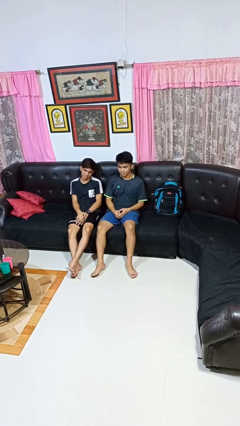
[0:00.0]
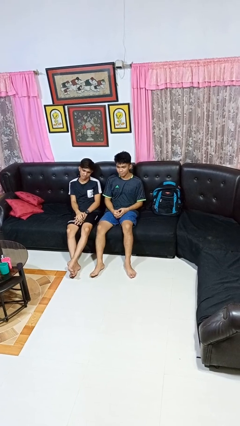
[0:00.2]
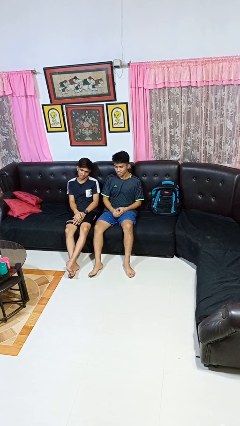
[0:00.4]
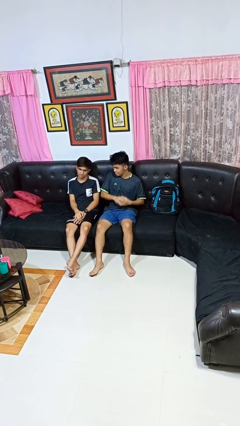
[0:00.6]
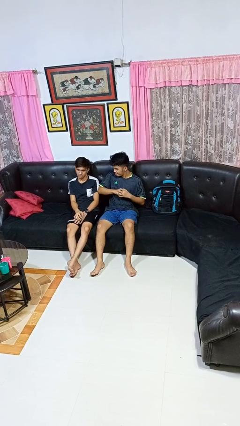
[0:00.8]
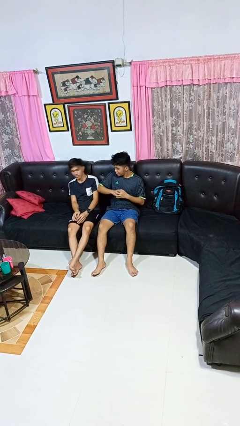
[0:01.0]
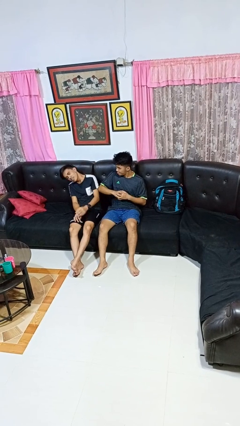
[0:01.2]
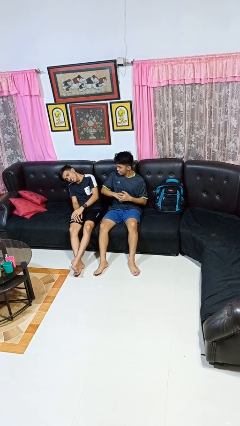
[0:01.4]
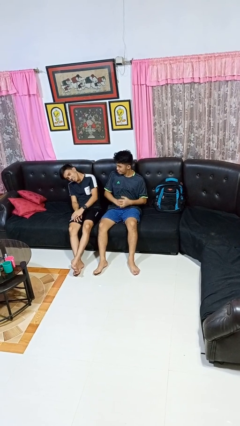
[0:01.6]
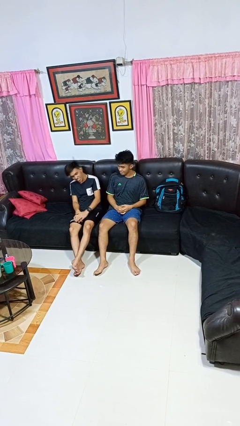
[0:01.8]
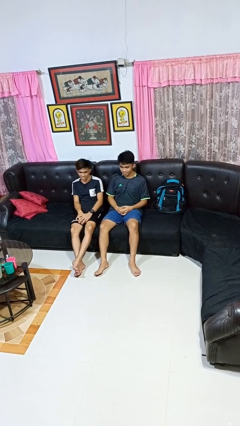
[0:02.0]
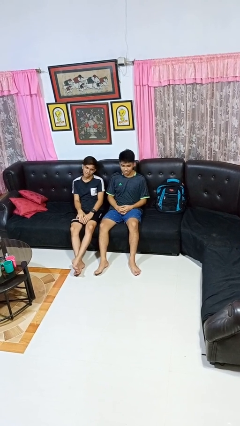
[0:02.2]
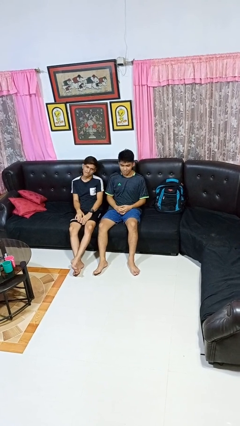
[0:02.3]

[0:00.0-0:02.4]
person nudges person with elbow

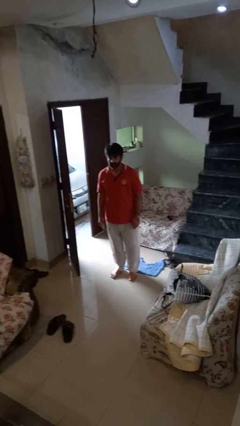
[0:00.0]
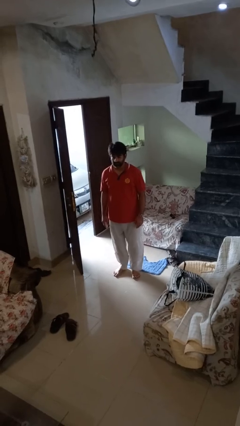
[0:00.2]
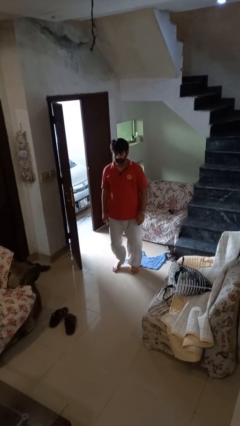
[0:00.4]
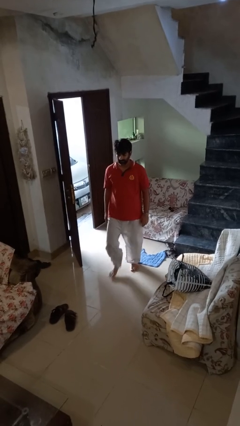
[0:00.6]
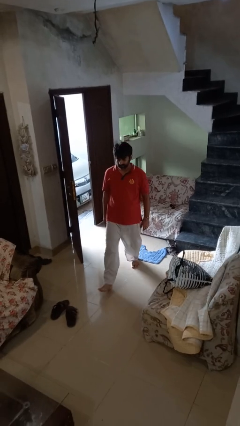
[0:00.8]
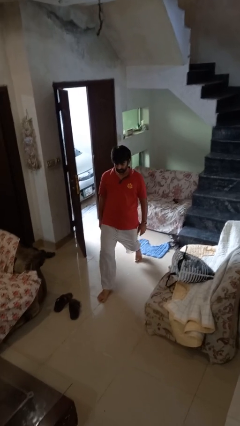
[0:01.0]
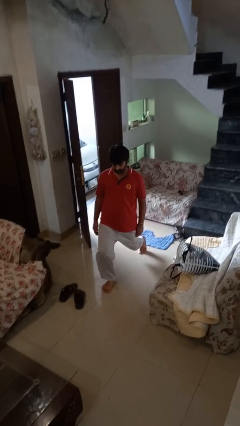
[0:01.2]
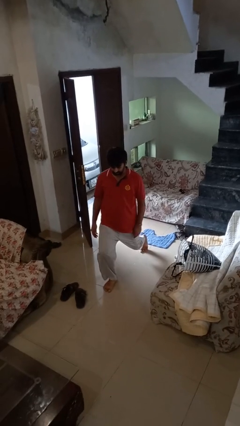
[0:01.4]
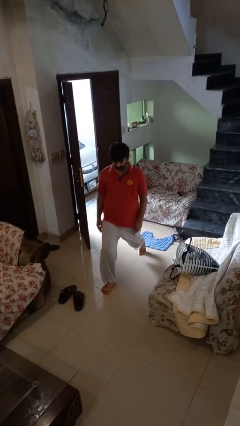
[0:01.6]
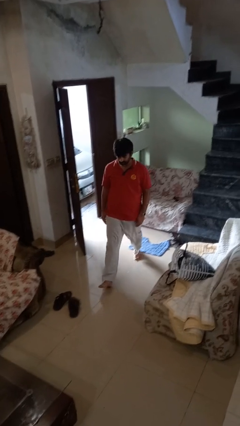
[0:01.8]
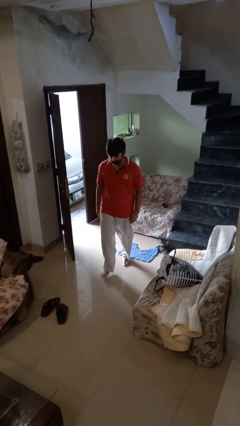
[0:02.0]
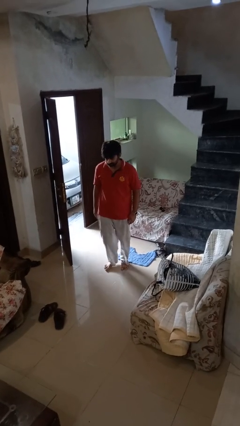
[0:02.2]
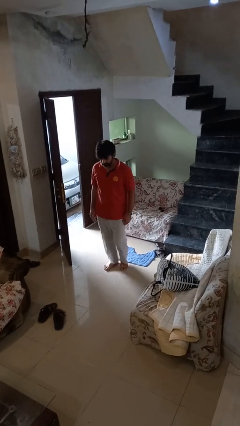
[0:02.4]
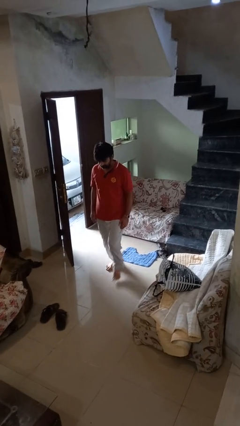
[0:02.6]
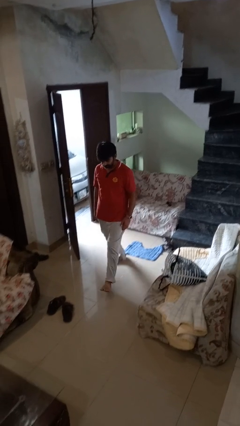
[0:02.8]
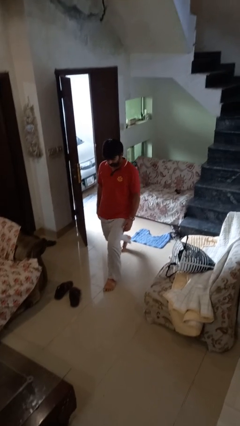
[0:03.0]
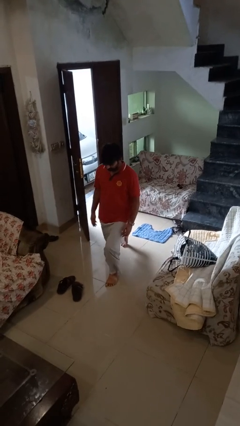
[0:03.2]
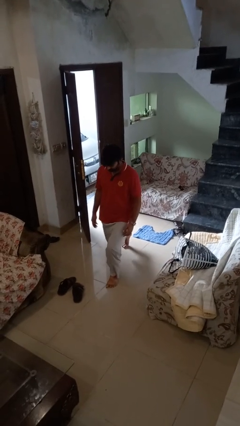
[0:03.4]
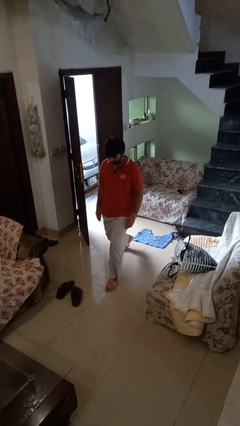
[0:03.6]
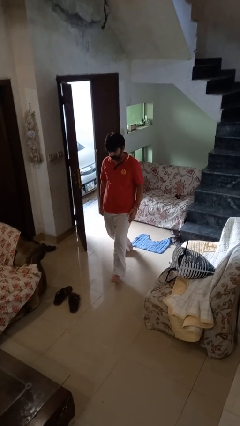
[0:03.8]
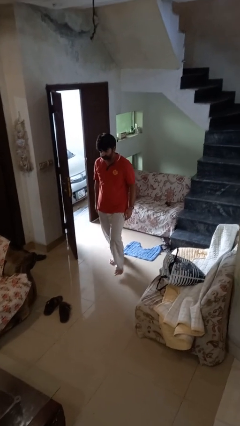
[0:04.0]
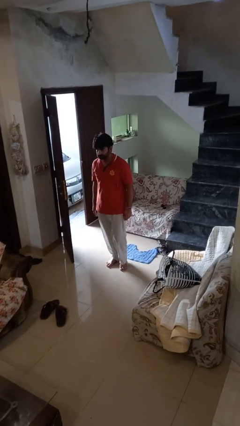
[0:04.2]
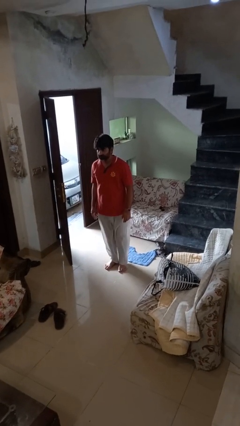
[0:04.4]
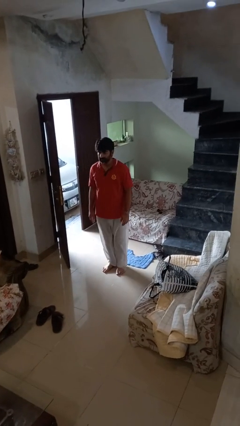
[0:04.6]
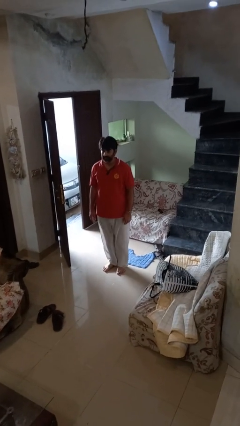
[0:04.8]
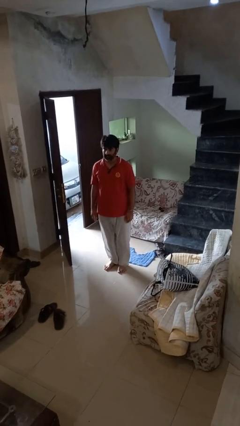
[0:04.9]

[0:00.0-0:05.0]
person exercises with lunges

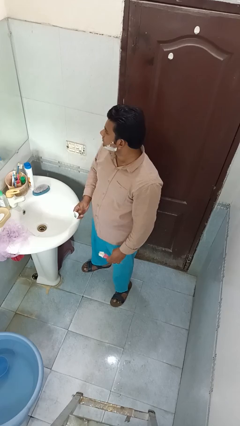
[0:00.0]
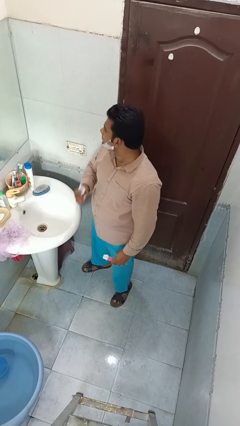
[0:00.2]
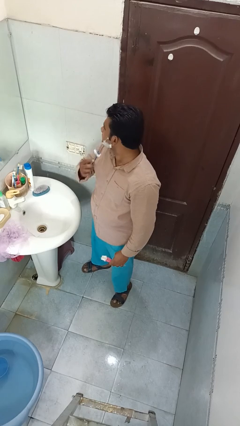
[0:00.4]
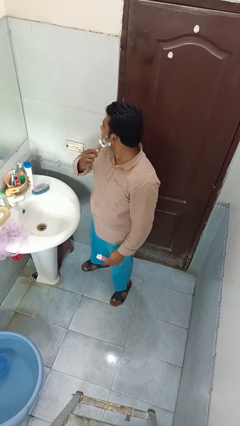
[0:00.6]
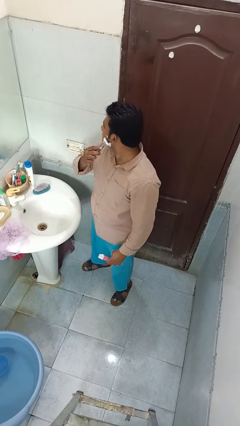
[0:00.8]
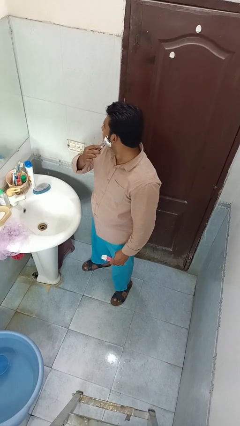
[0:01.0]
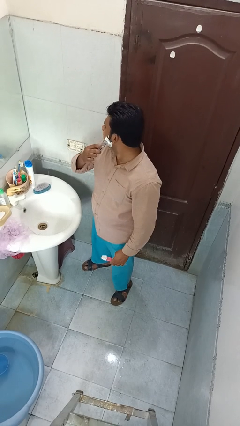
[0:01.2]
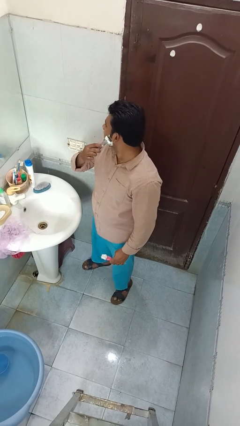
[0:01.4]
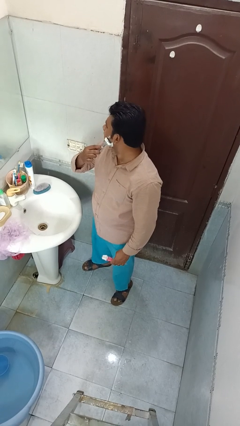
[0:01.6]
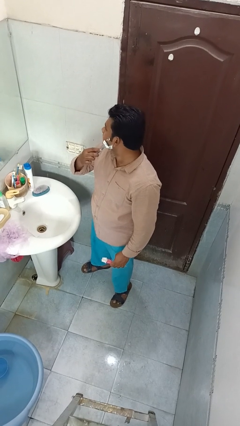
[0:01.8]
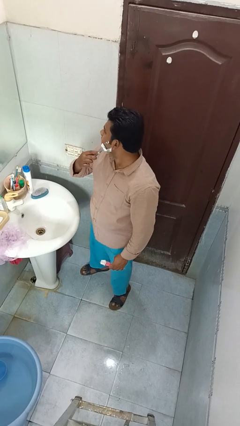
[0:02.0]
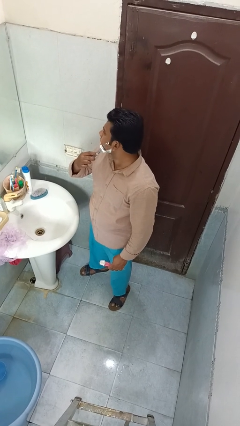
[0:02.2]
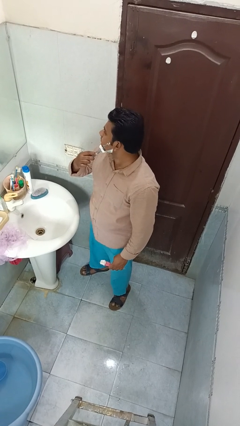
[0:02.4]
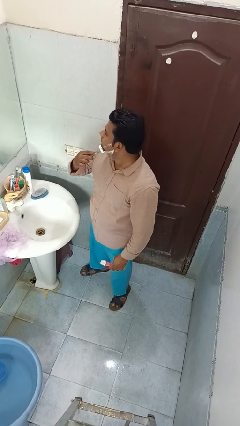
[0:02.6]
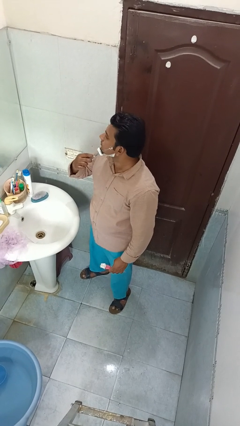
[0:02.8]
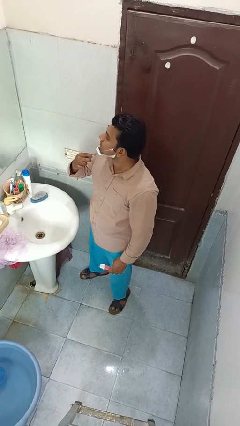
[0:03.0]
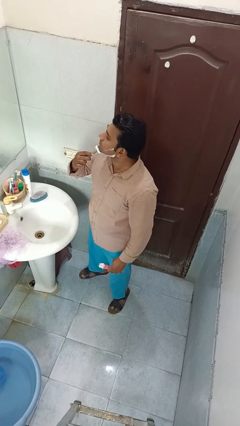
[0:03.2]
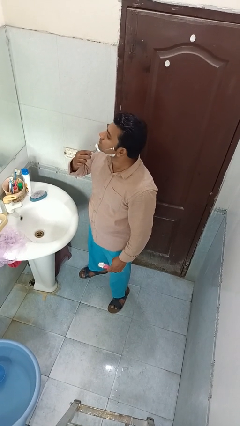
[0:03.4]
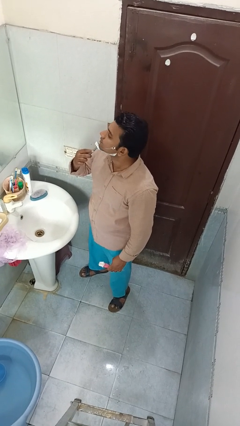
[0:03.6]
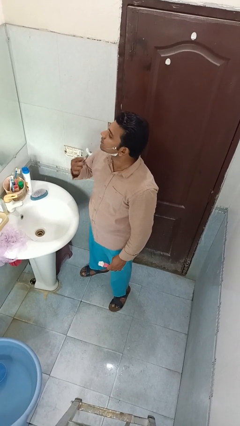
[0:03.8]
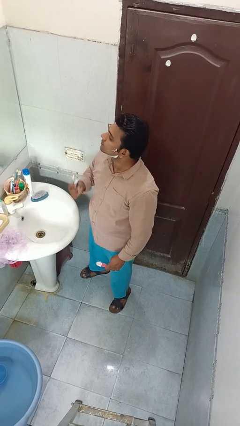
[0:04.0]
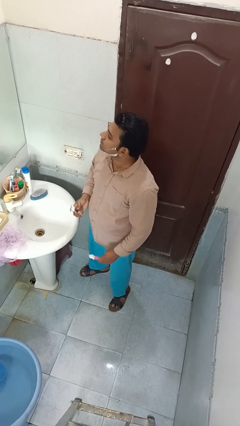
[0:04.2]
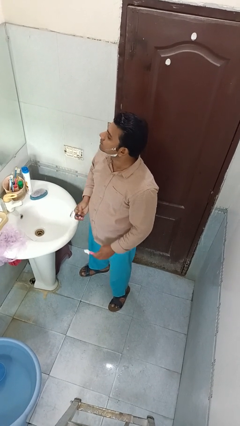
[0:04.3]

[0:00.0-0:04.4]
person shaves face

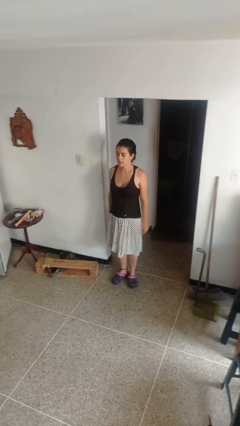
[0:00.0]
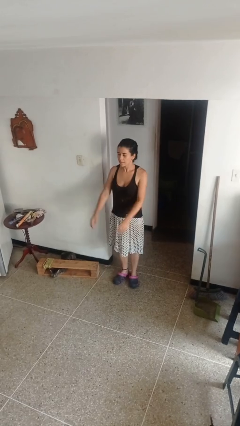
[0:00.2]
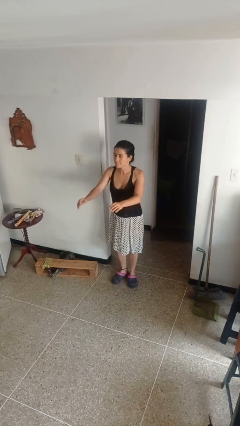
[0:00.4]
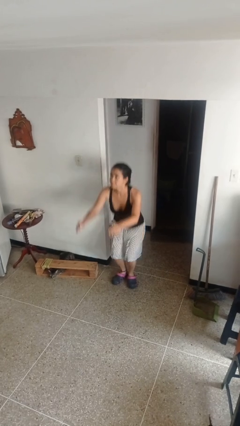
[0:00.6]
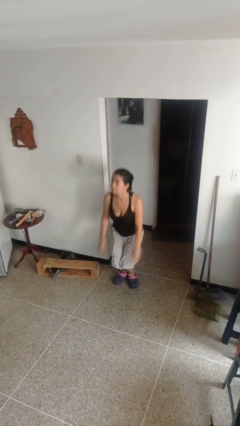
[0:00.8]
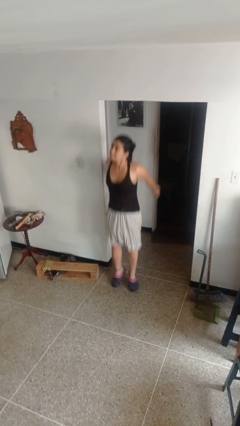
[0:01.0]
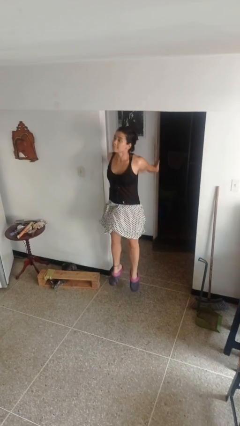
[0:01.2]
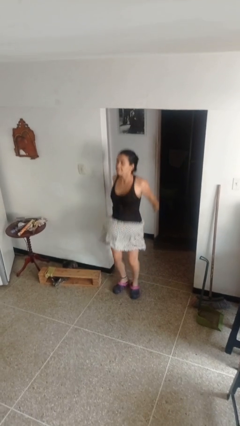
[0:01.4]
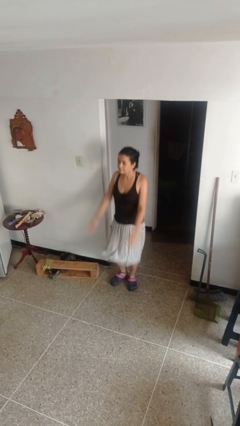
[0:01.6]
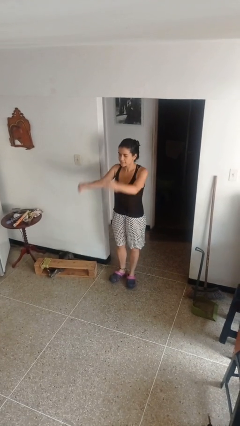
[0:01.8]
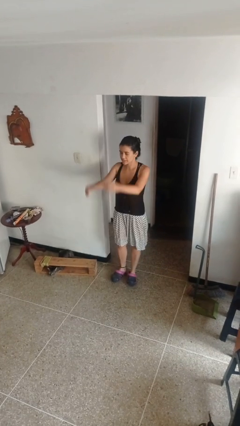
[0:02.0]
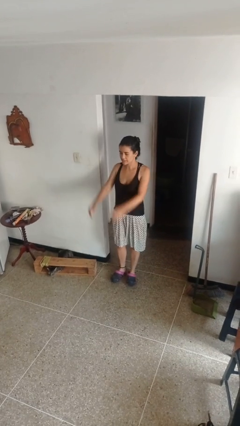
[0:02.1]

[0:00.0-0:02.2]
person jumps

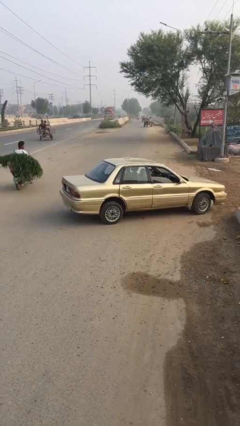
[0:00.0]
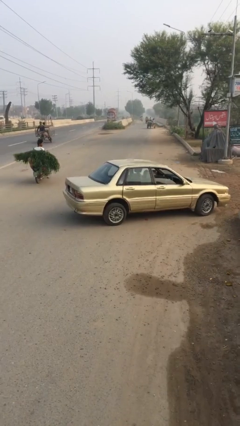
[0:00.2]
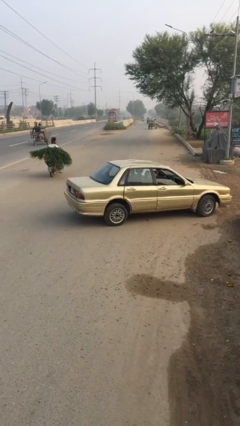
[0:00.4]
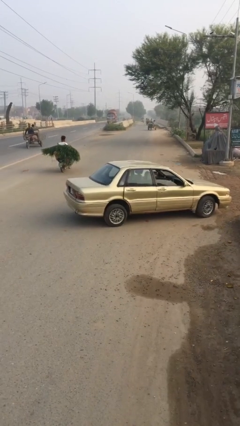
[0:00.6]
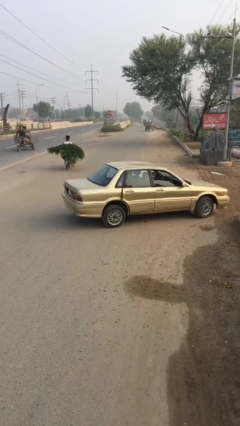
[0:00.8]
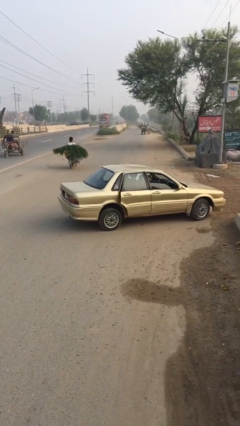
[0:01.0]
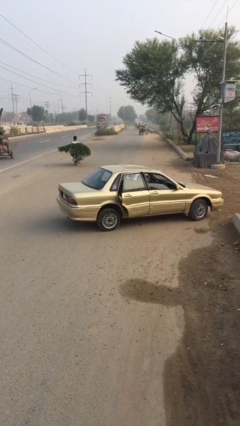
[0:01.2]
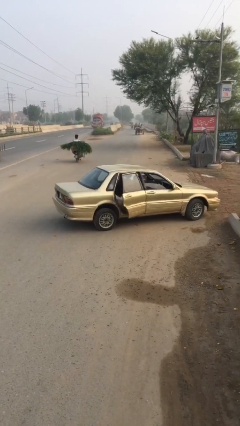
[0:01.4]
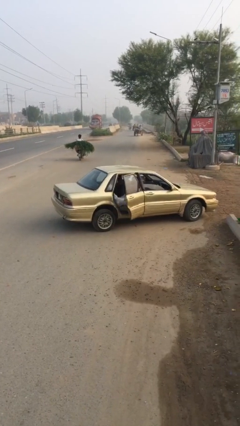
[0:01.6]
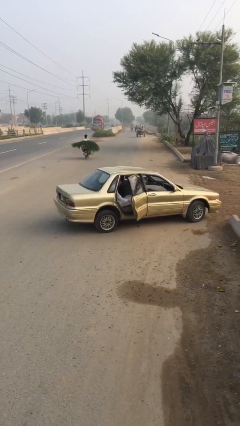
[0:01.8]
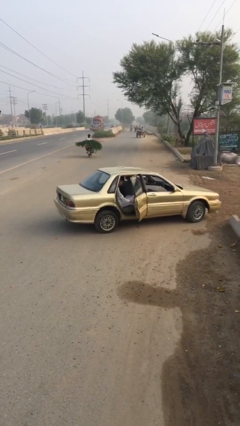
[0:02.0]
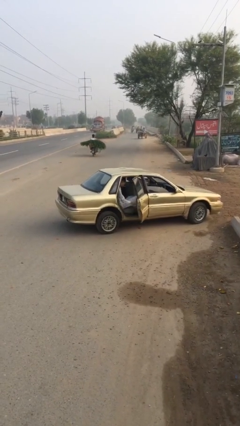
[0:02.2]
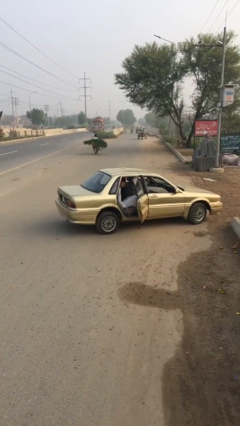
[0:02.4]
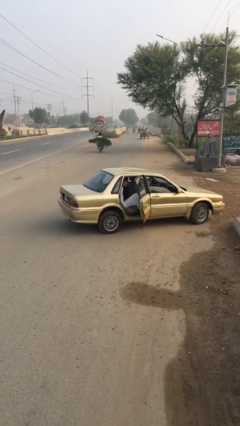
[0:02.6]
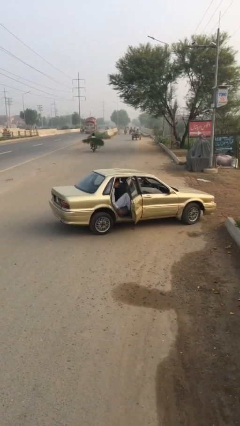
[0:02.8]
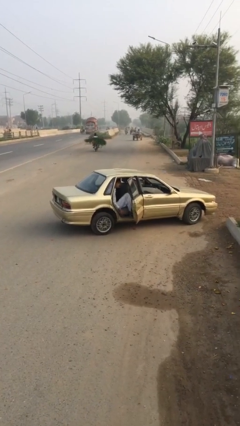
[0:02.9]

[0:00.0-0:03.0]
person opens car door

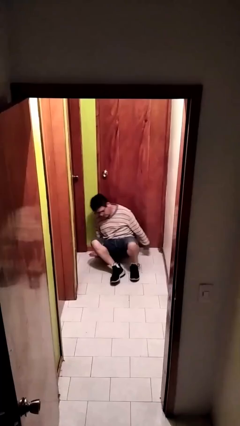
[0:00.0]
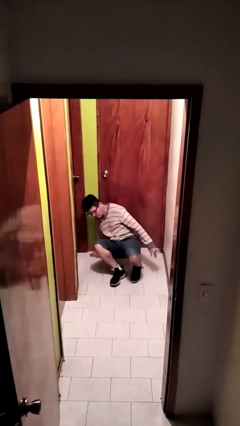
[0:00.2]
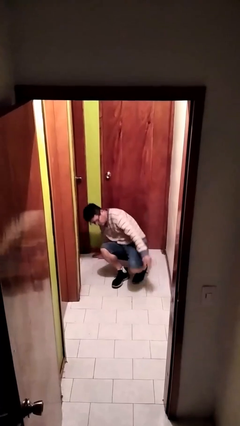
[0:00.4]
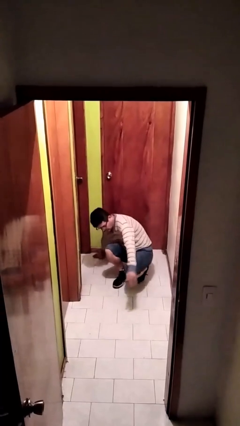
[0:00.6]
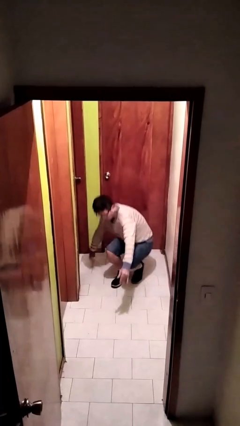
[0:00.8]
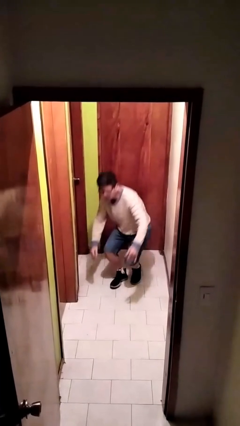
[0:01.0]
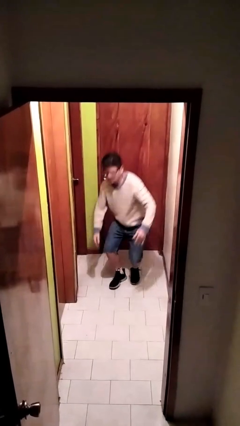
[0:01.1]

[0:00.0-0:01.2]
person stands up
